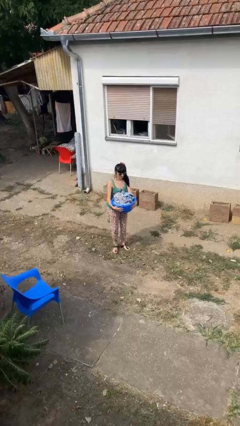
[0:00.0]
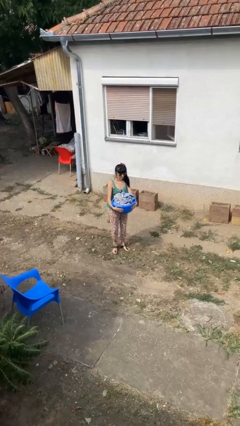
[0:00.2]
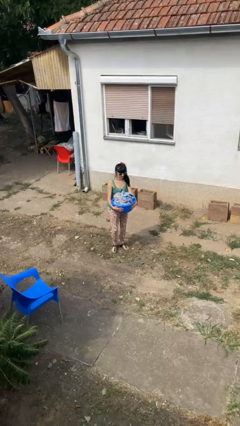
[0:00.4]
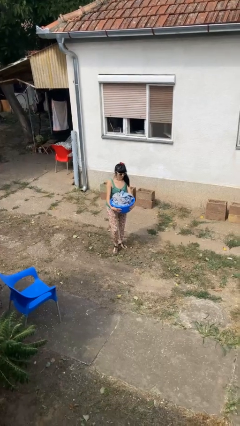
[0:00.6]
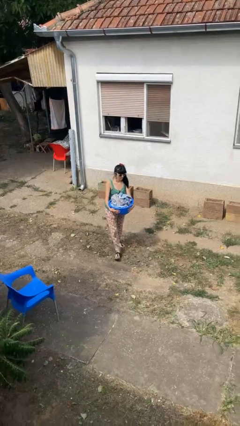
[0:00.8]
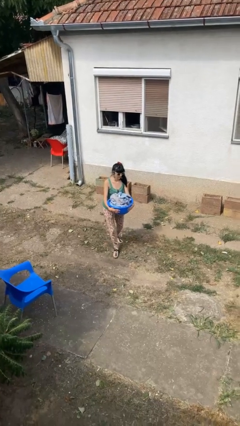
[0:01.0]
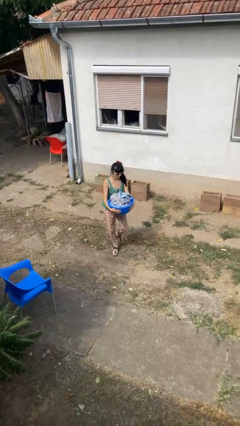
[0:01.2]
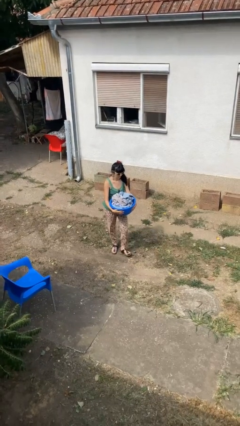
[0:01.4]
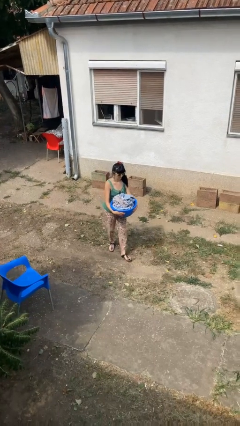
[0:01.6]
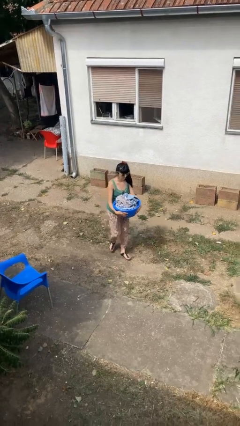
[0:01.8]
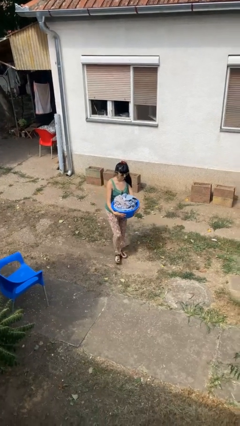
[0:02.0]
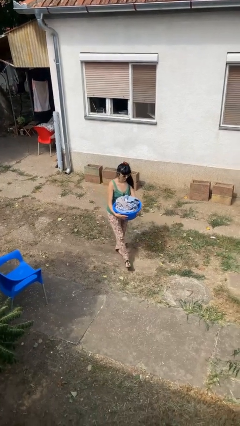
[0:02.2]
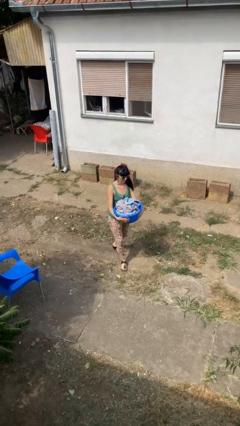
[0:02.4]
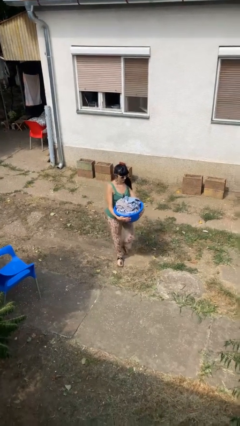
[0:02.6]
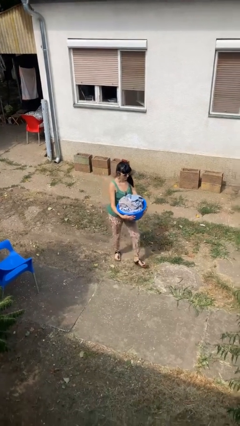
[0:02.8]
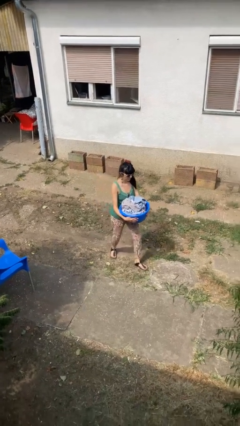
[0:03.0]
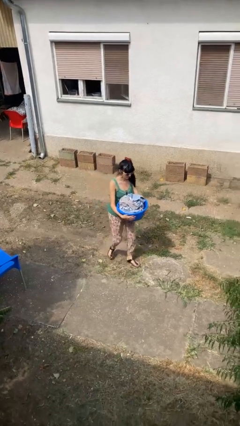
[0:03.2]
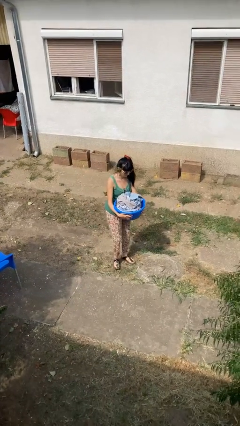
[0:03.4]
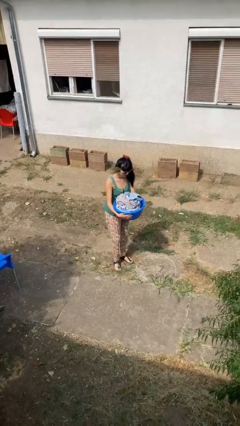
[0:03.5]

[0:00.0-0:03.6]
person carries laundry basket

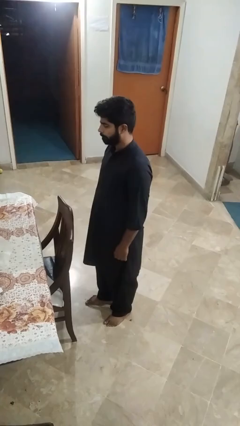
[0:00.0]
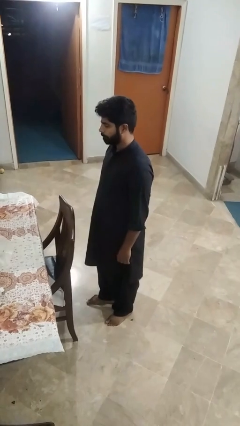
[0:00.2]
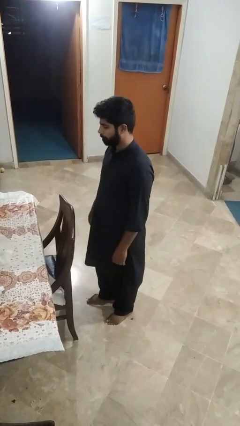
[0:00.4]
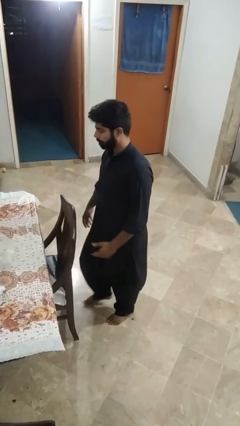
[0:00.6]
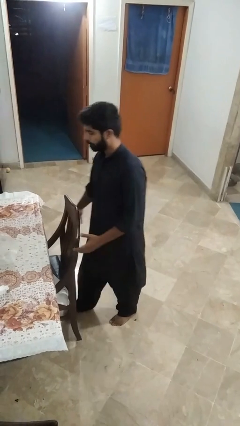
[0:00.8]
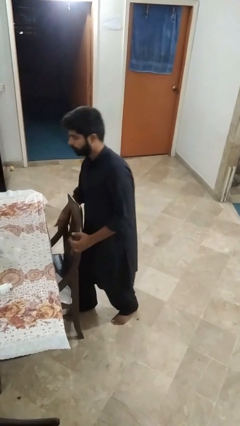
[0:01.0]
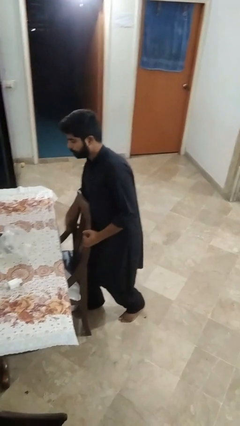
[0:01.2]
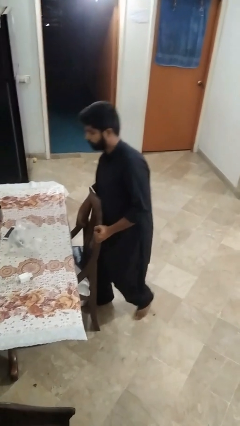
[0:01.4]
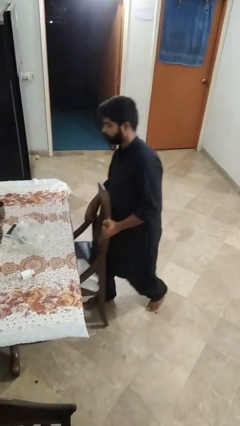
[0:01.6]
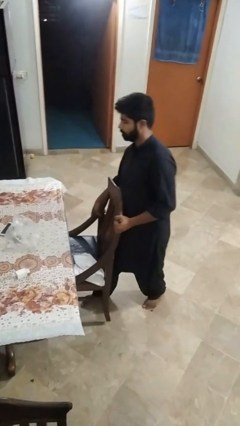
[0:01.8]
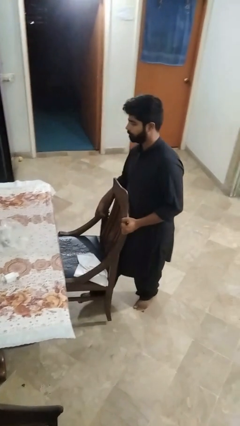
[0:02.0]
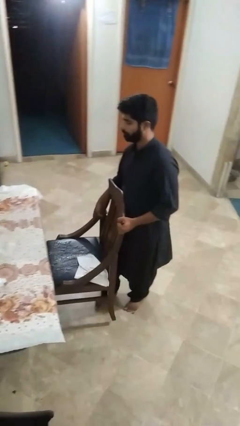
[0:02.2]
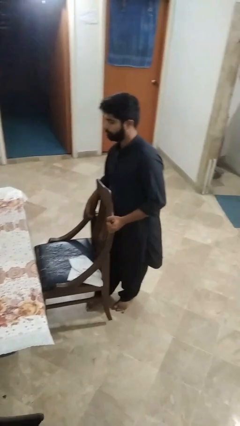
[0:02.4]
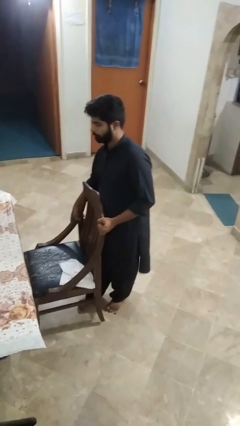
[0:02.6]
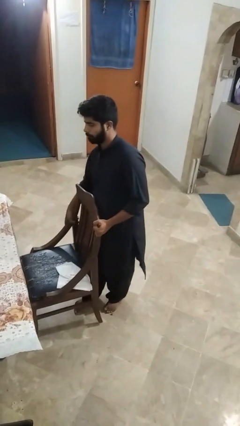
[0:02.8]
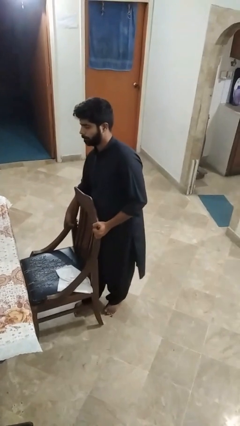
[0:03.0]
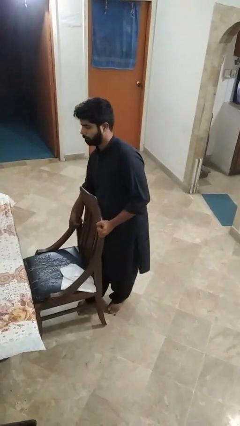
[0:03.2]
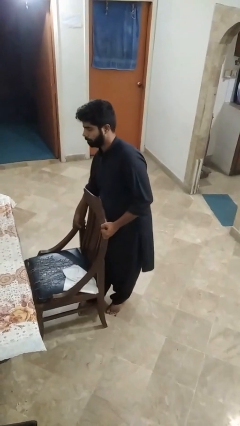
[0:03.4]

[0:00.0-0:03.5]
person pulls out chair

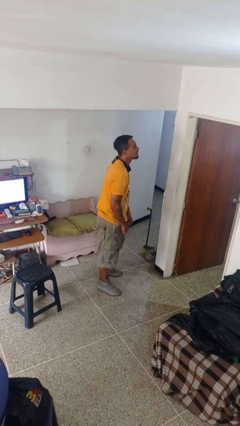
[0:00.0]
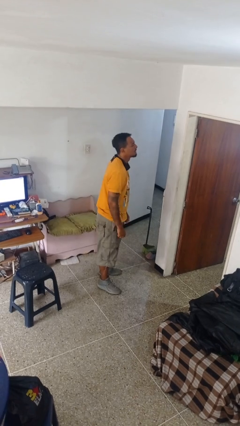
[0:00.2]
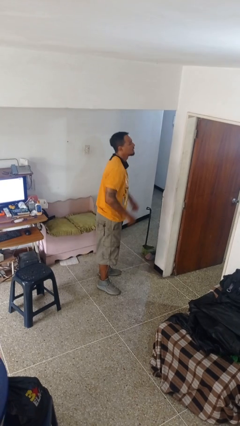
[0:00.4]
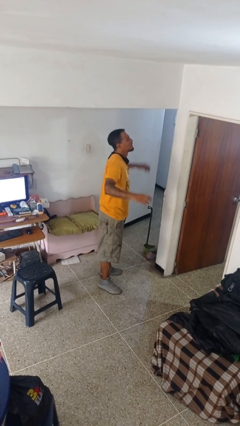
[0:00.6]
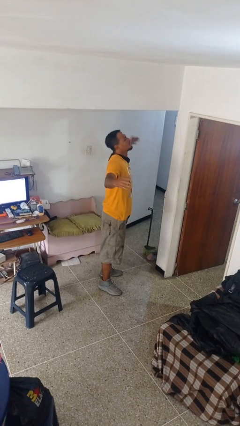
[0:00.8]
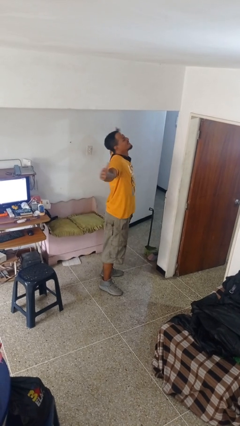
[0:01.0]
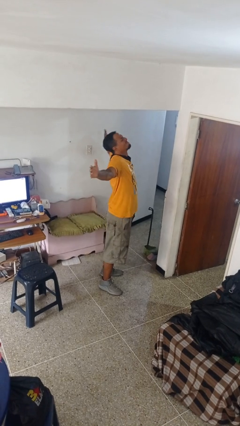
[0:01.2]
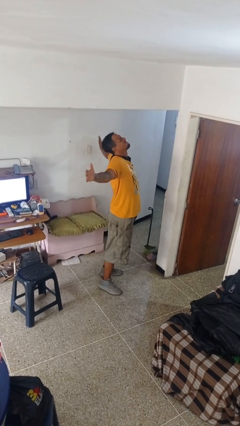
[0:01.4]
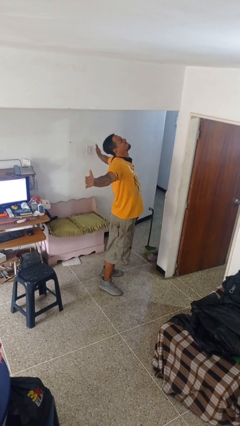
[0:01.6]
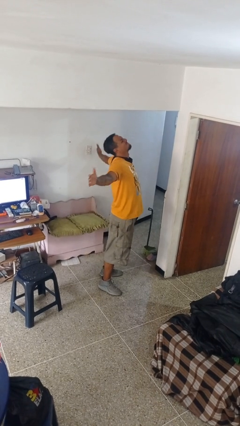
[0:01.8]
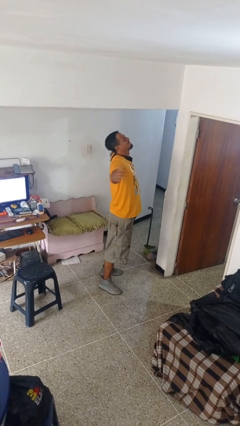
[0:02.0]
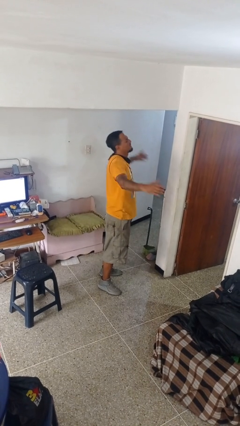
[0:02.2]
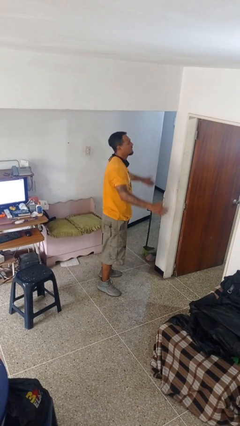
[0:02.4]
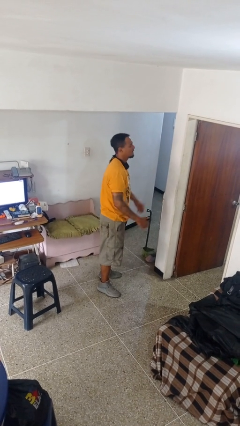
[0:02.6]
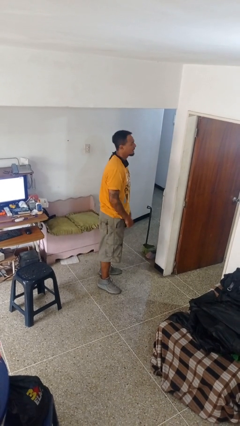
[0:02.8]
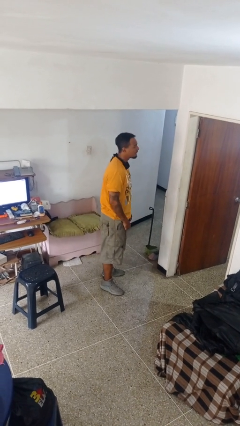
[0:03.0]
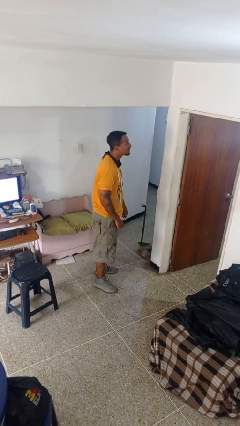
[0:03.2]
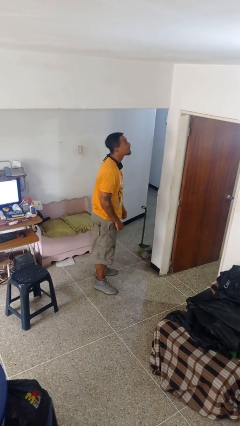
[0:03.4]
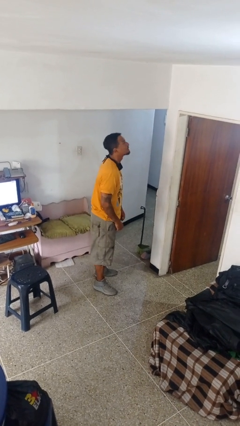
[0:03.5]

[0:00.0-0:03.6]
person stretches arms to side

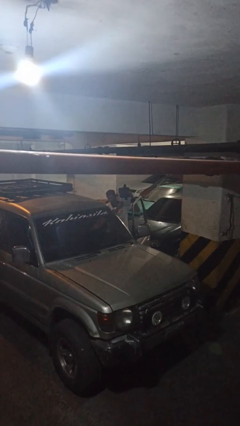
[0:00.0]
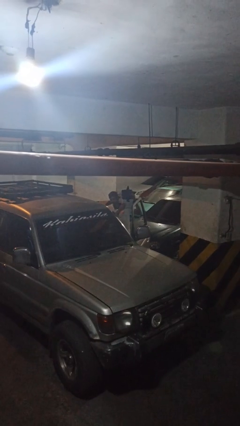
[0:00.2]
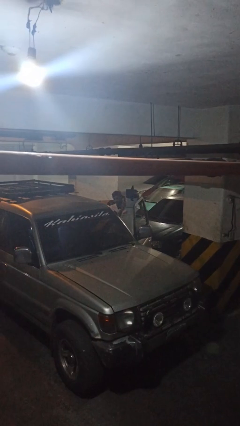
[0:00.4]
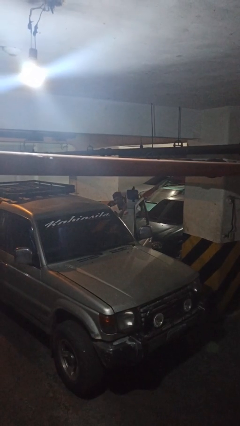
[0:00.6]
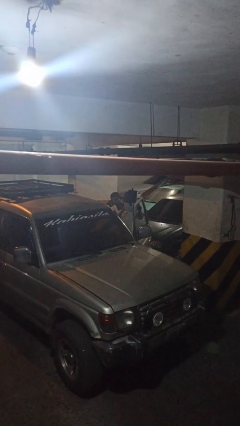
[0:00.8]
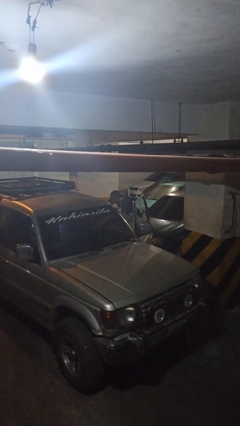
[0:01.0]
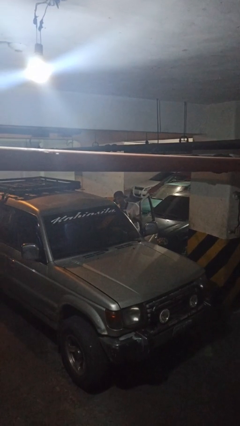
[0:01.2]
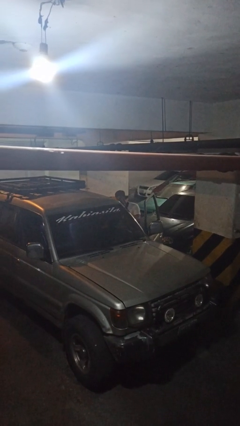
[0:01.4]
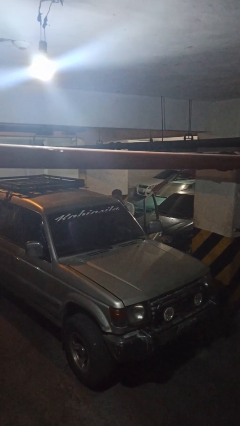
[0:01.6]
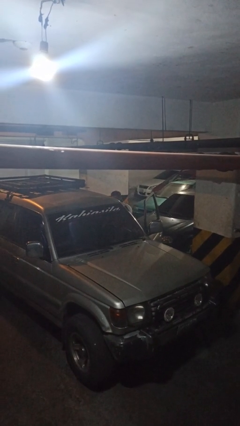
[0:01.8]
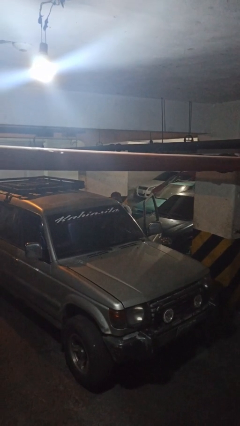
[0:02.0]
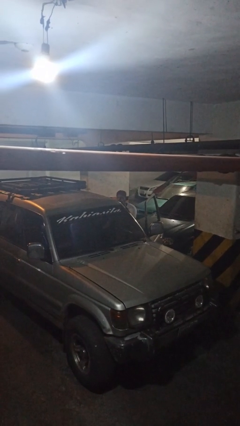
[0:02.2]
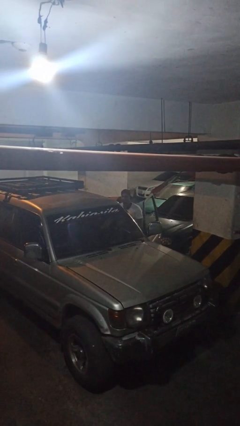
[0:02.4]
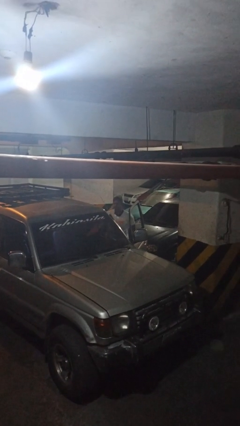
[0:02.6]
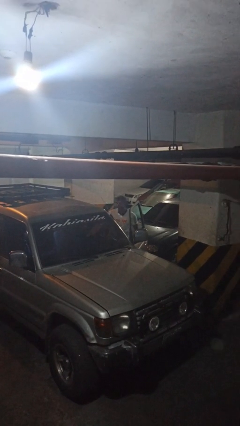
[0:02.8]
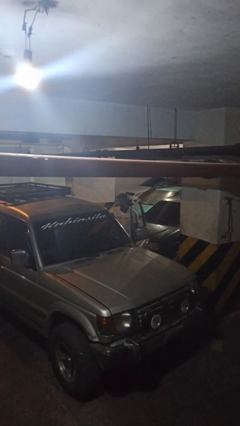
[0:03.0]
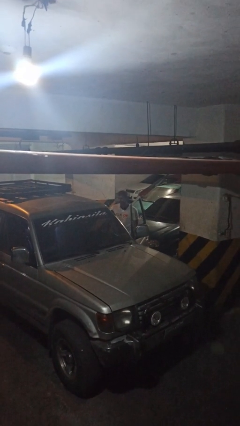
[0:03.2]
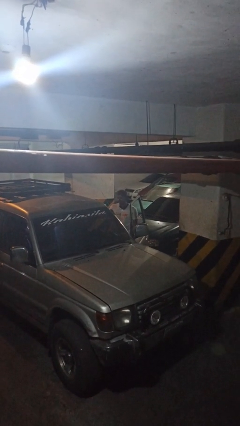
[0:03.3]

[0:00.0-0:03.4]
person loads car

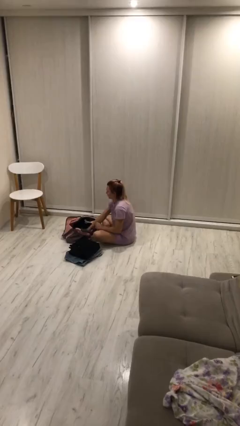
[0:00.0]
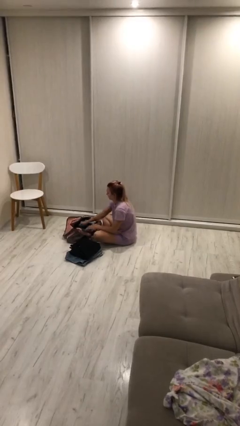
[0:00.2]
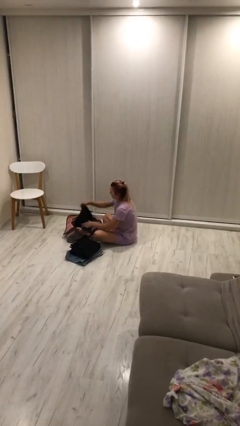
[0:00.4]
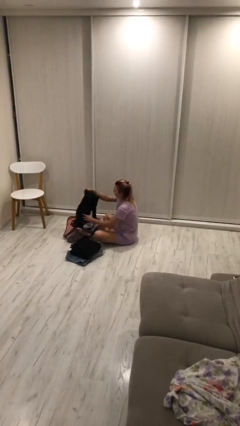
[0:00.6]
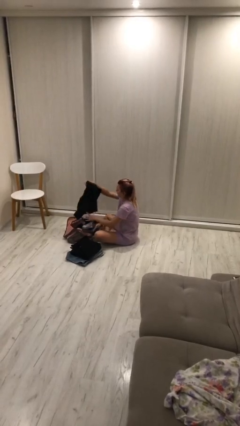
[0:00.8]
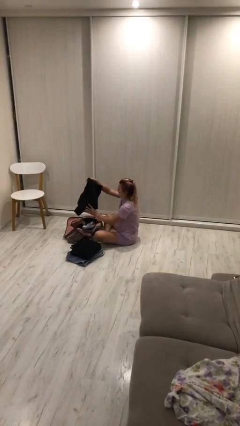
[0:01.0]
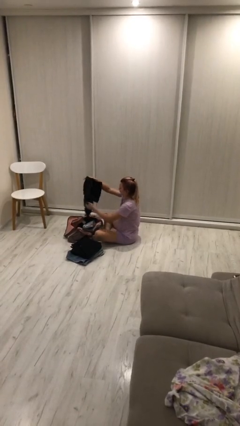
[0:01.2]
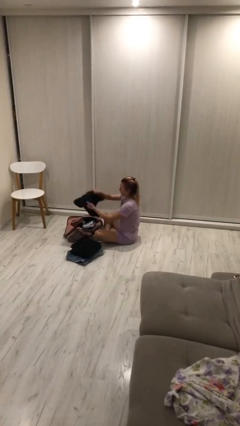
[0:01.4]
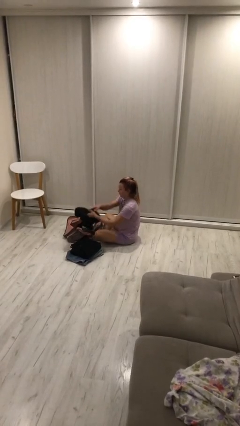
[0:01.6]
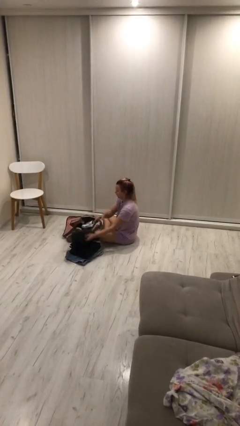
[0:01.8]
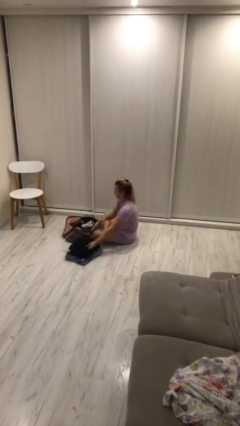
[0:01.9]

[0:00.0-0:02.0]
person unloads clothes from suitcase

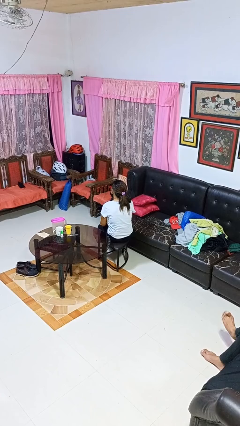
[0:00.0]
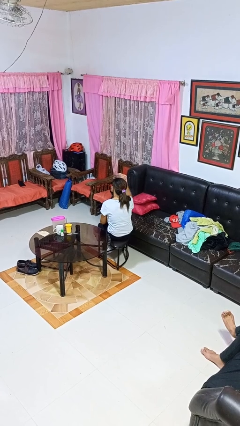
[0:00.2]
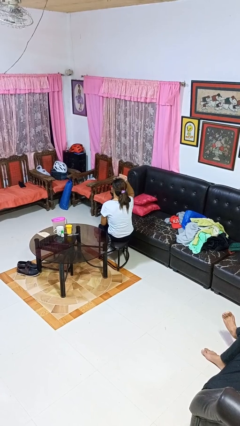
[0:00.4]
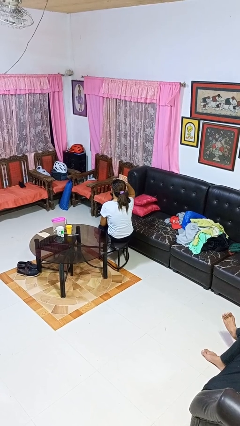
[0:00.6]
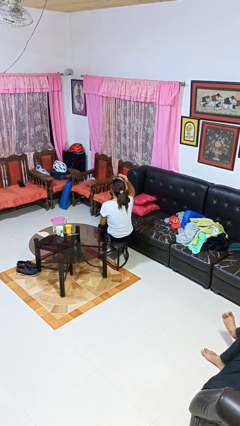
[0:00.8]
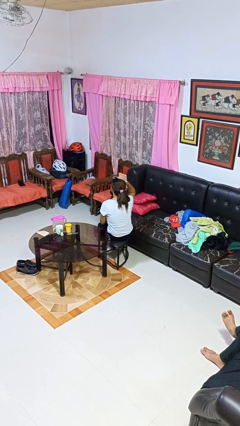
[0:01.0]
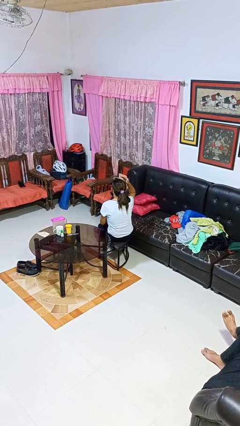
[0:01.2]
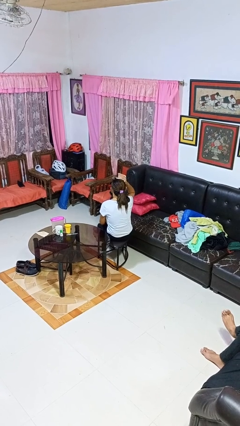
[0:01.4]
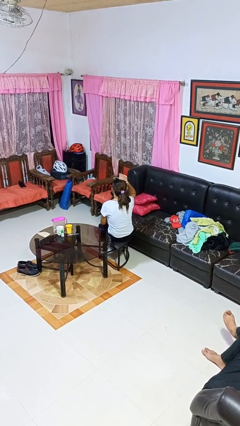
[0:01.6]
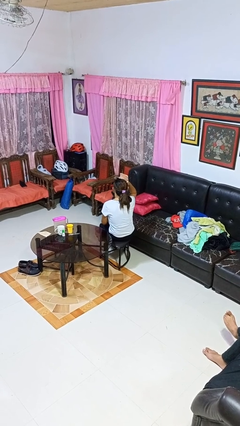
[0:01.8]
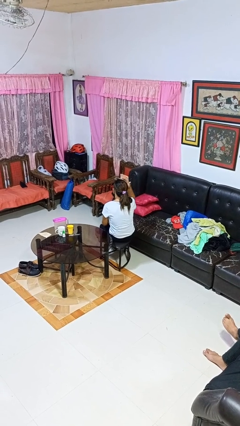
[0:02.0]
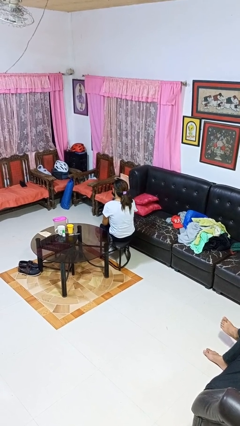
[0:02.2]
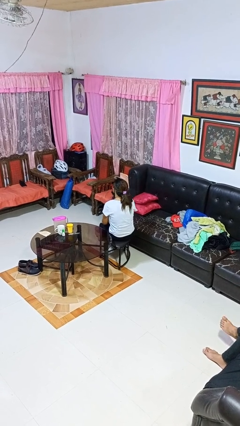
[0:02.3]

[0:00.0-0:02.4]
person pats head
